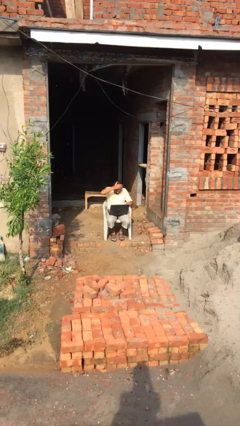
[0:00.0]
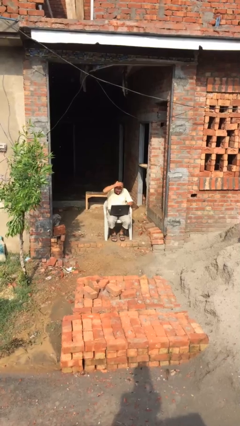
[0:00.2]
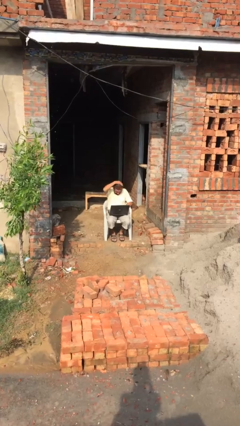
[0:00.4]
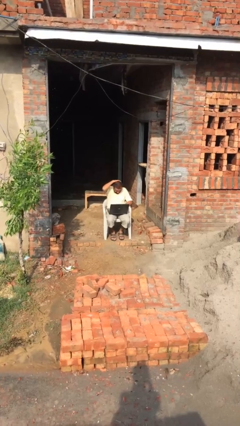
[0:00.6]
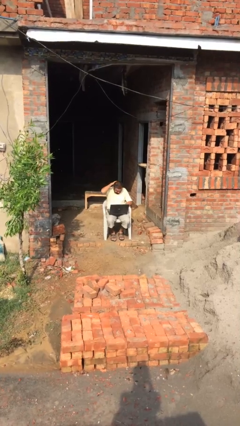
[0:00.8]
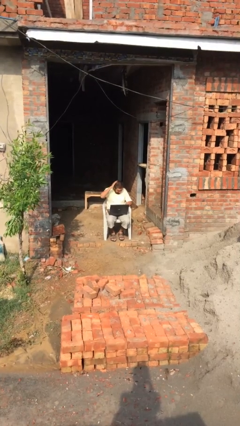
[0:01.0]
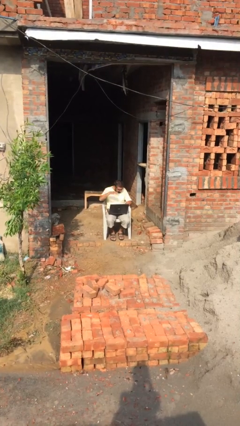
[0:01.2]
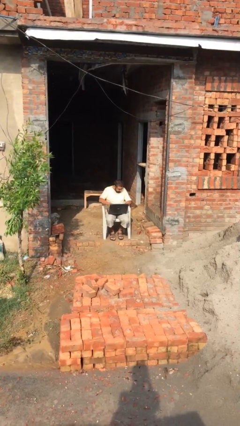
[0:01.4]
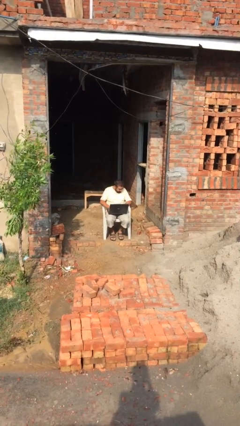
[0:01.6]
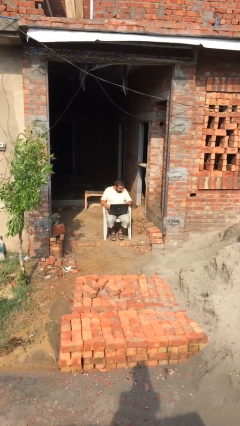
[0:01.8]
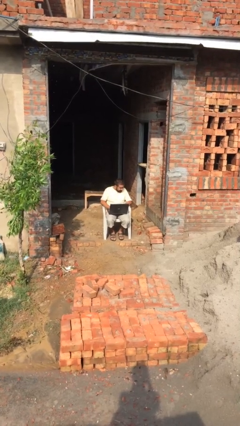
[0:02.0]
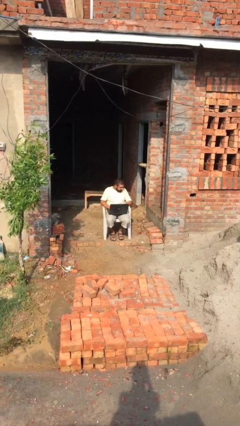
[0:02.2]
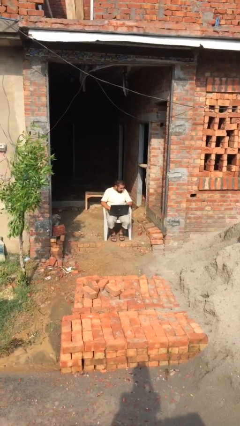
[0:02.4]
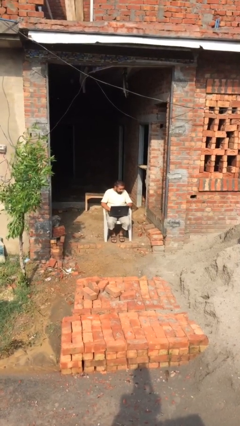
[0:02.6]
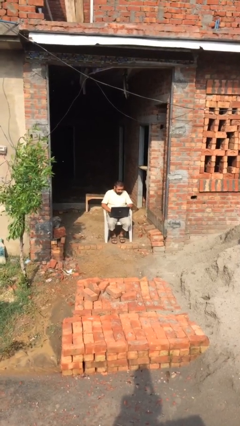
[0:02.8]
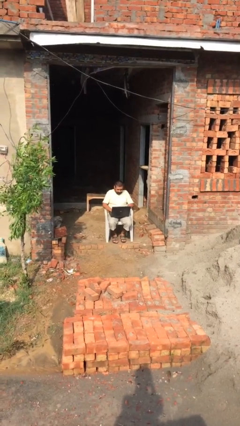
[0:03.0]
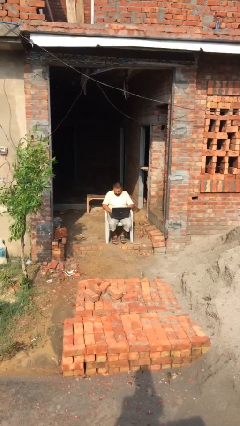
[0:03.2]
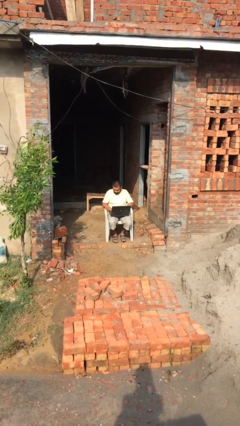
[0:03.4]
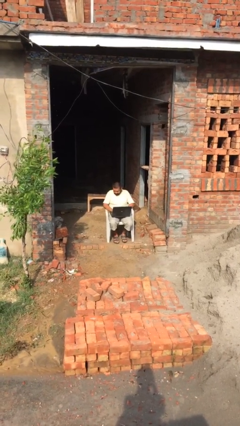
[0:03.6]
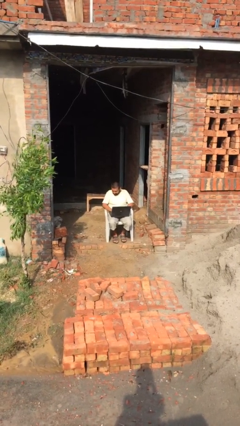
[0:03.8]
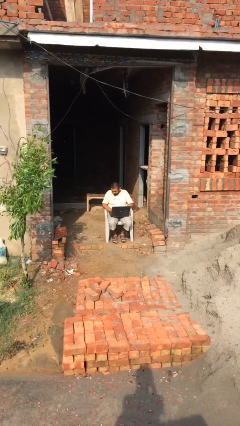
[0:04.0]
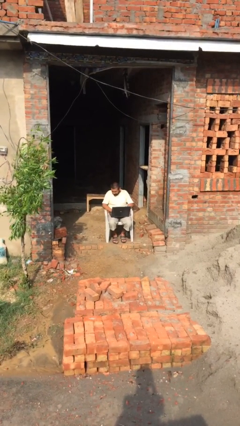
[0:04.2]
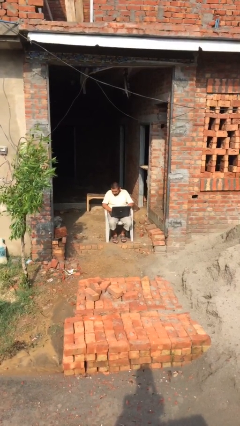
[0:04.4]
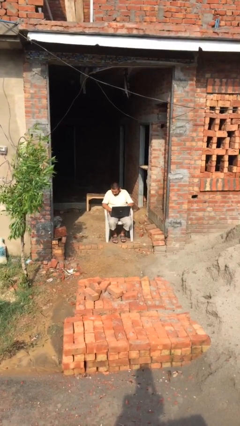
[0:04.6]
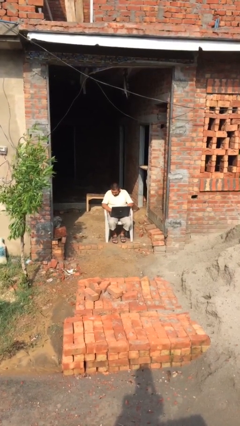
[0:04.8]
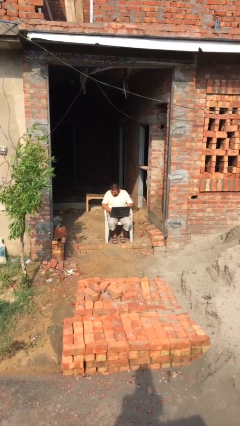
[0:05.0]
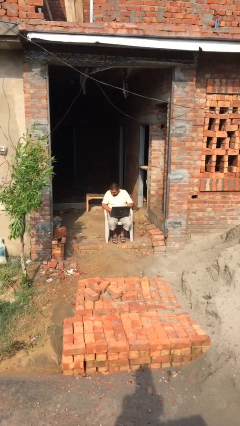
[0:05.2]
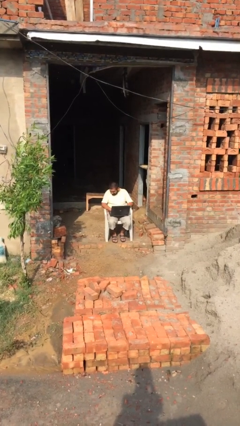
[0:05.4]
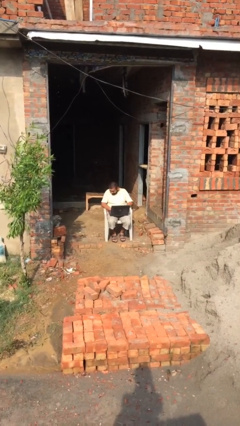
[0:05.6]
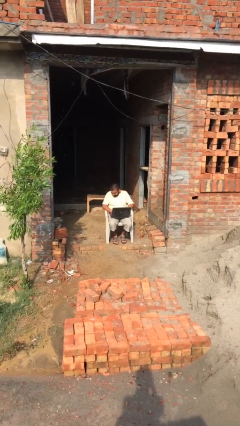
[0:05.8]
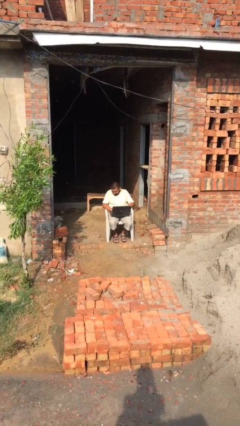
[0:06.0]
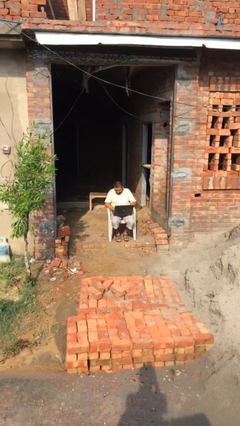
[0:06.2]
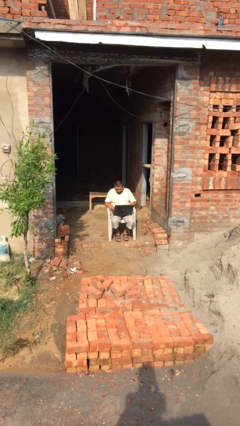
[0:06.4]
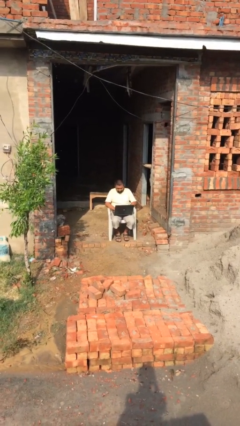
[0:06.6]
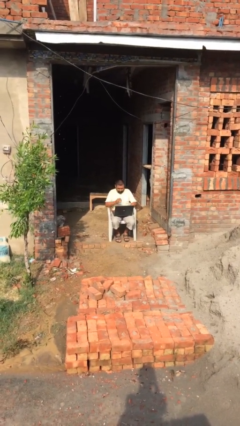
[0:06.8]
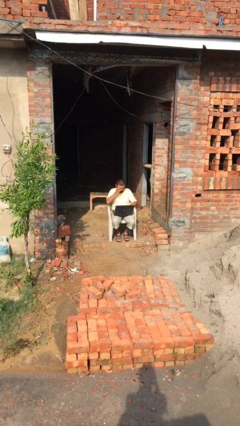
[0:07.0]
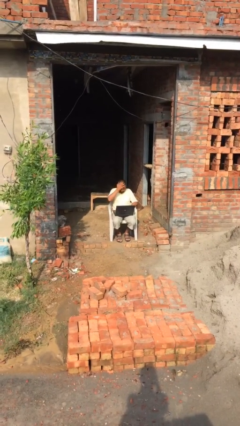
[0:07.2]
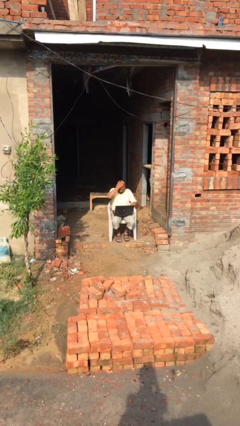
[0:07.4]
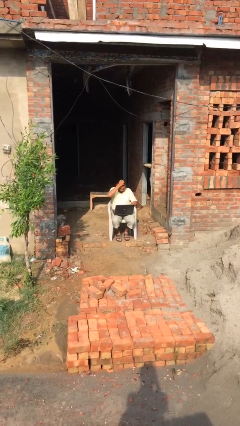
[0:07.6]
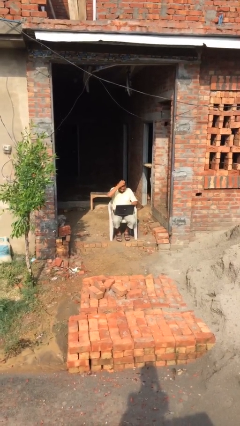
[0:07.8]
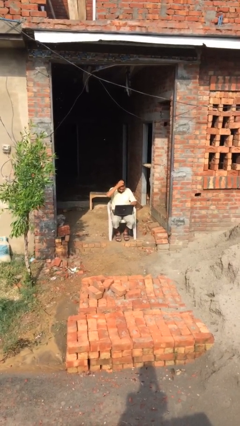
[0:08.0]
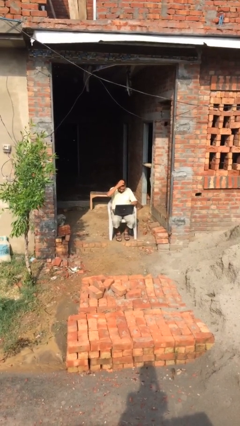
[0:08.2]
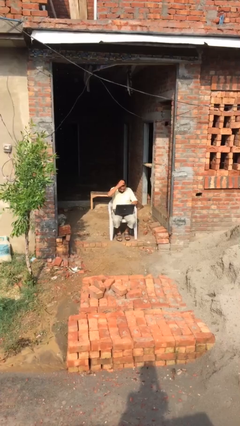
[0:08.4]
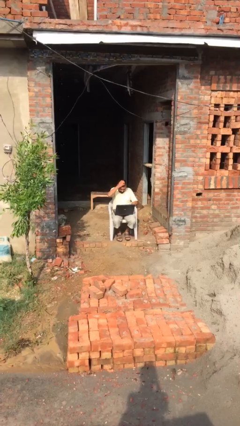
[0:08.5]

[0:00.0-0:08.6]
person interacts with laptop

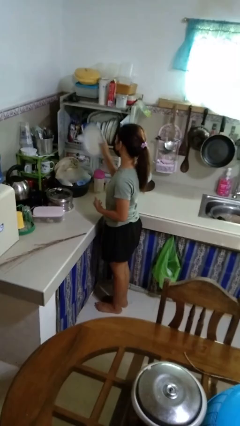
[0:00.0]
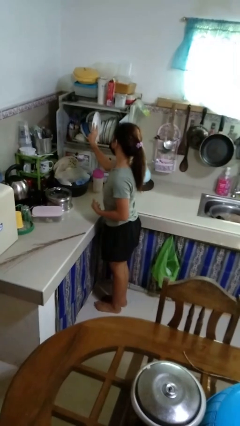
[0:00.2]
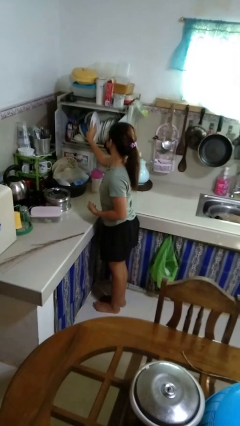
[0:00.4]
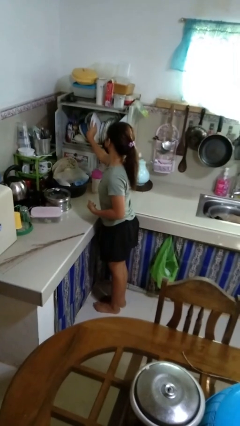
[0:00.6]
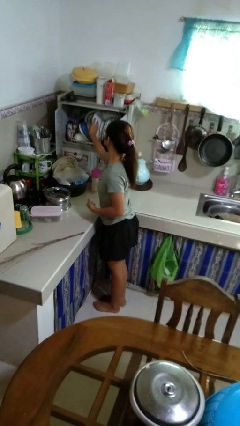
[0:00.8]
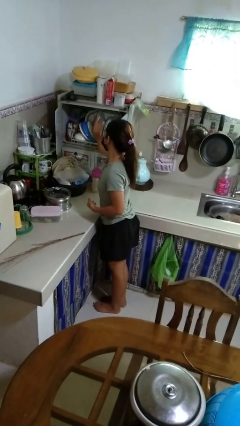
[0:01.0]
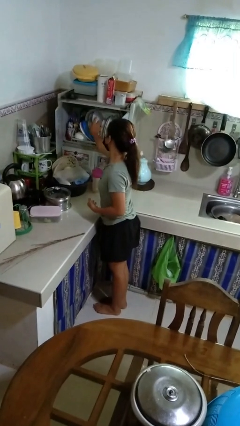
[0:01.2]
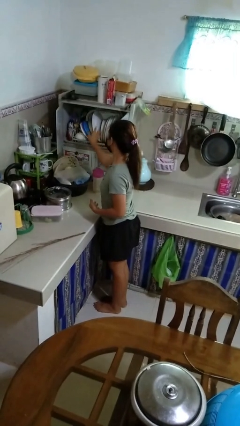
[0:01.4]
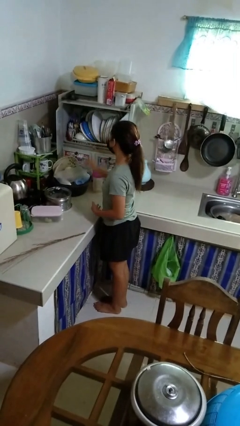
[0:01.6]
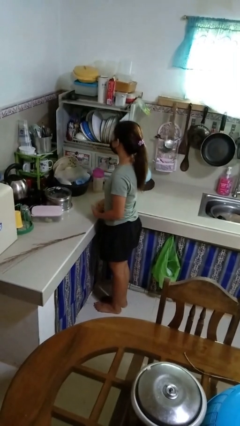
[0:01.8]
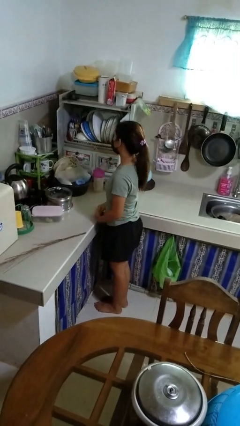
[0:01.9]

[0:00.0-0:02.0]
person puts object into kitchen drawer

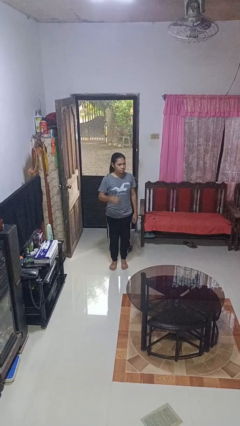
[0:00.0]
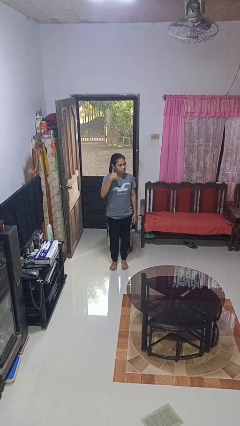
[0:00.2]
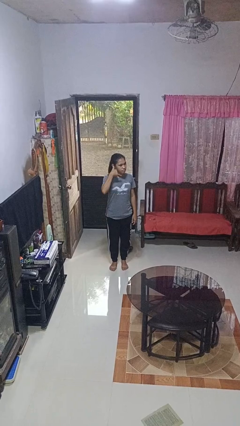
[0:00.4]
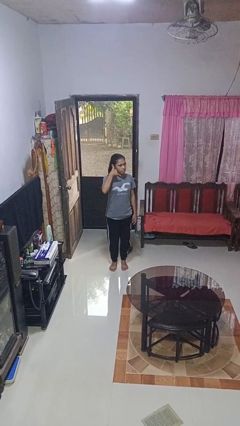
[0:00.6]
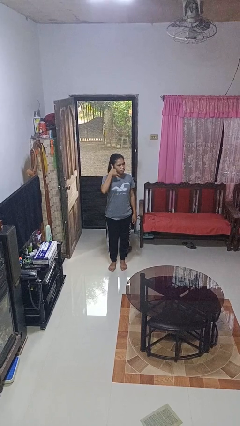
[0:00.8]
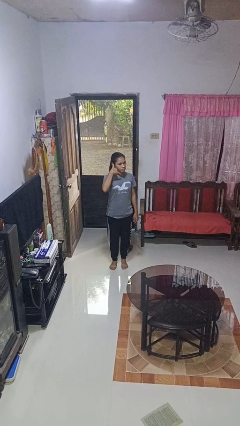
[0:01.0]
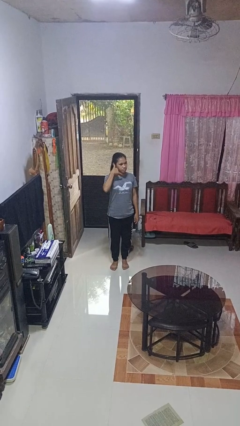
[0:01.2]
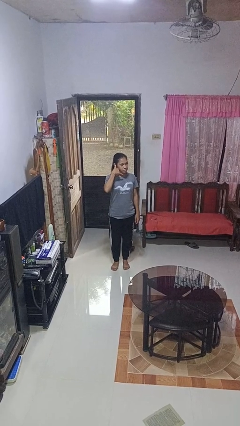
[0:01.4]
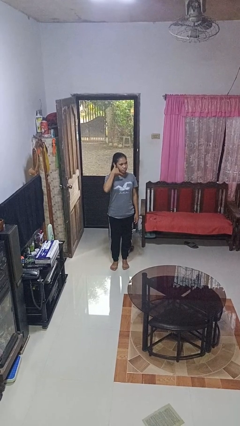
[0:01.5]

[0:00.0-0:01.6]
person gestures call me

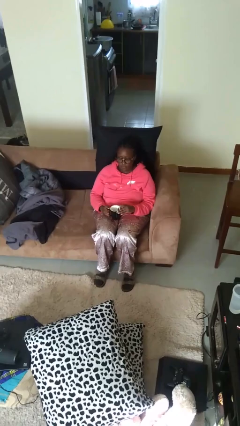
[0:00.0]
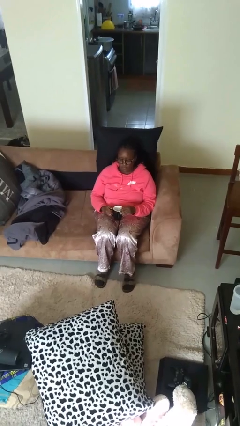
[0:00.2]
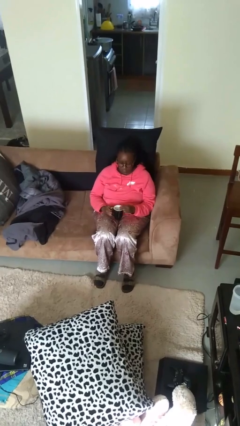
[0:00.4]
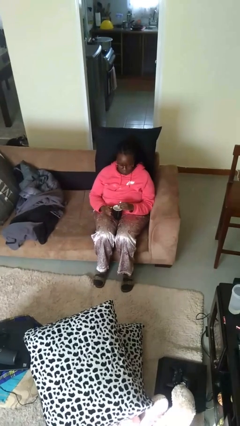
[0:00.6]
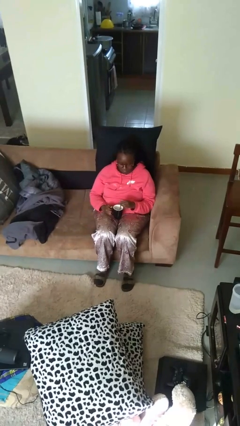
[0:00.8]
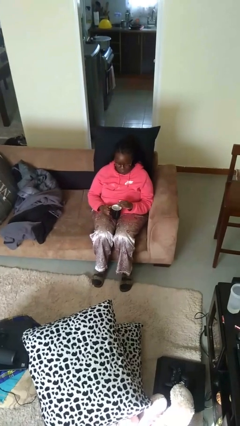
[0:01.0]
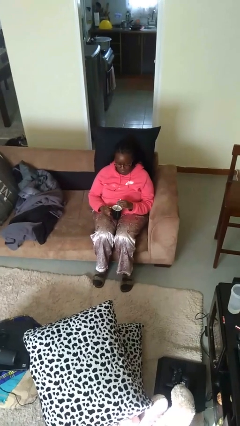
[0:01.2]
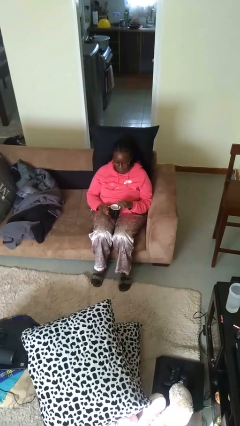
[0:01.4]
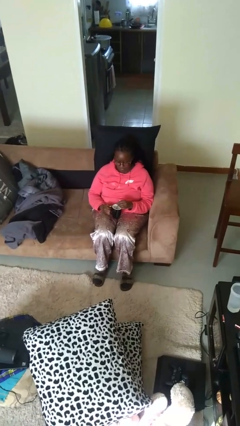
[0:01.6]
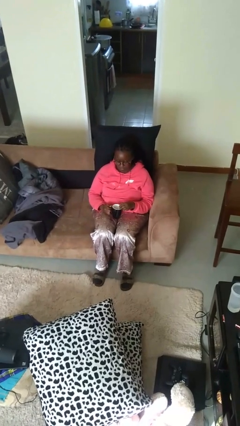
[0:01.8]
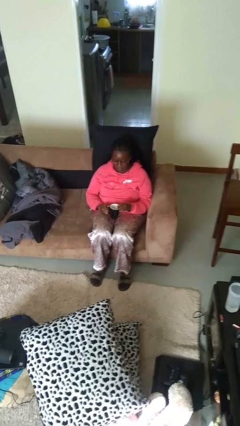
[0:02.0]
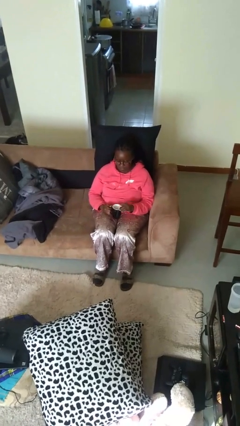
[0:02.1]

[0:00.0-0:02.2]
person stirs mug

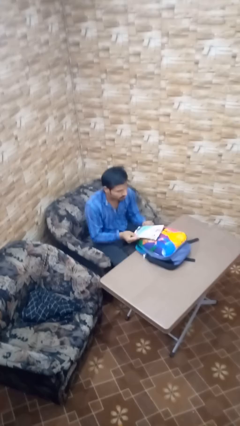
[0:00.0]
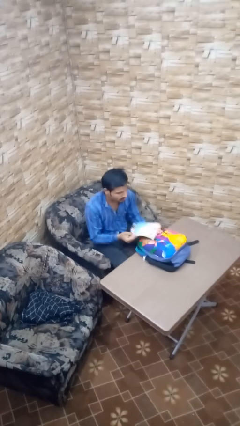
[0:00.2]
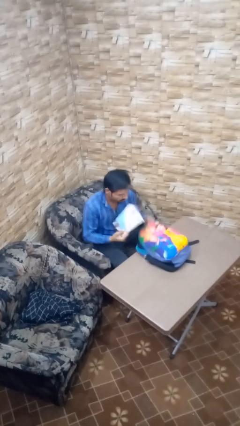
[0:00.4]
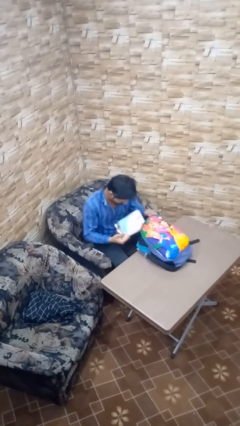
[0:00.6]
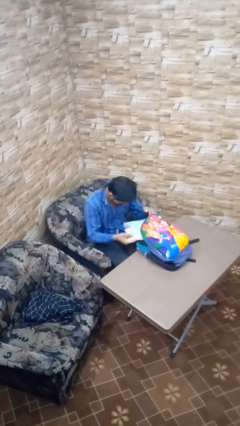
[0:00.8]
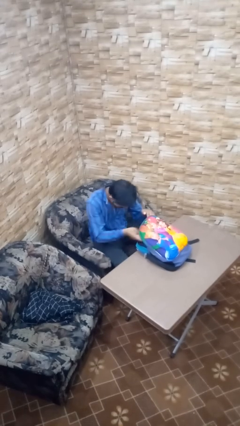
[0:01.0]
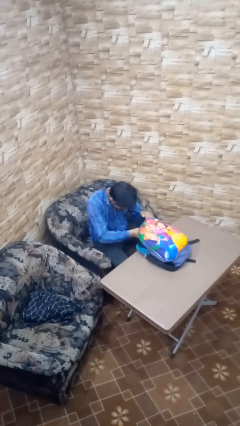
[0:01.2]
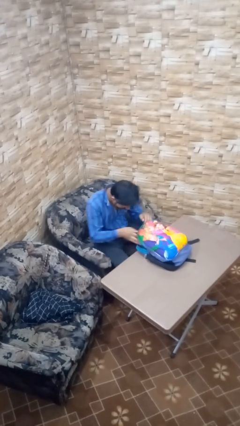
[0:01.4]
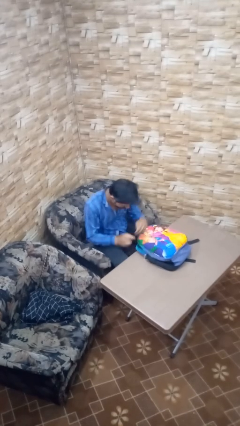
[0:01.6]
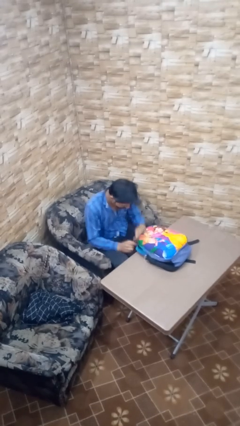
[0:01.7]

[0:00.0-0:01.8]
person puts object into backpack

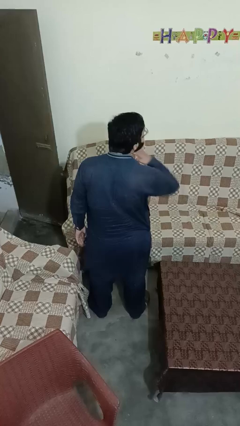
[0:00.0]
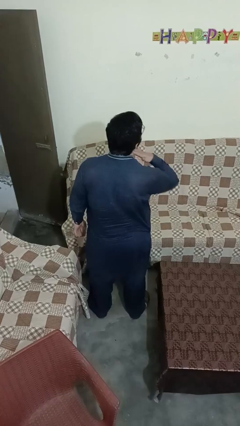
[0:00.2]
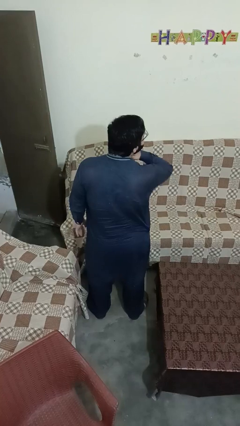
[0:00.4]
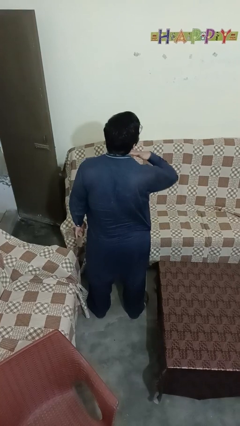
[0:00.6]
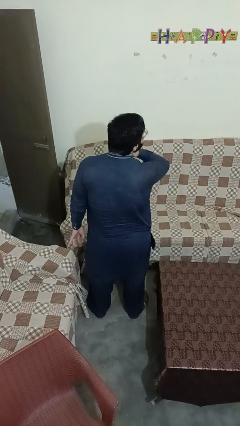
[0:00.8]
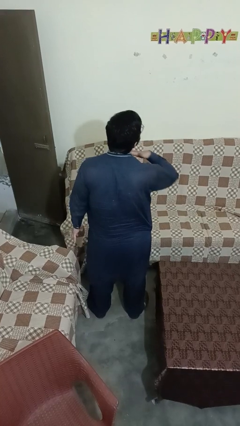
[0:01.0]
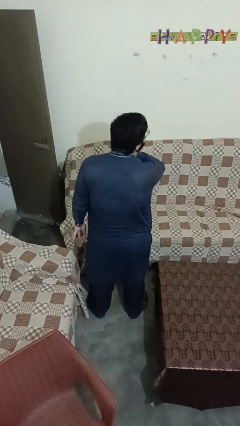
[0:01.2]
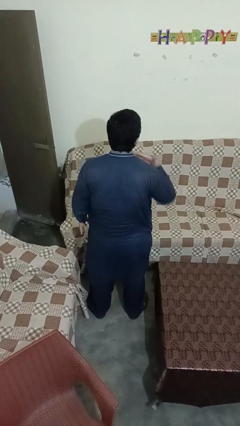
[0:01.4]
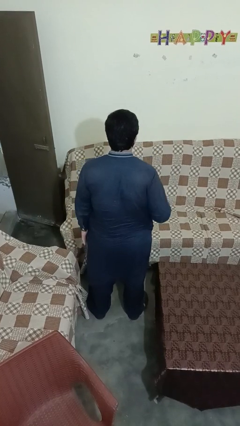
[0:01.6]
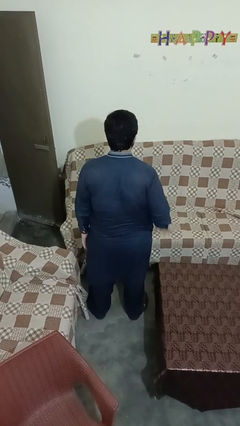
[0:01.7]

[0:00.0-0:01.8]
person gestures cut
